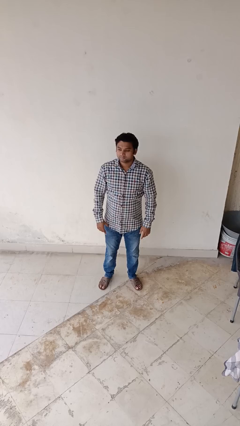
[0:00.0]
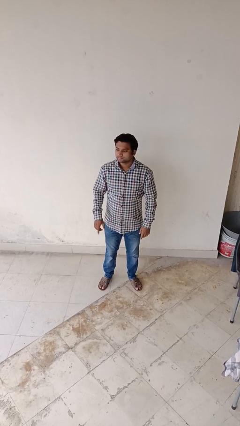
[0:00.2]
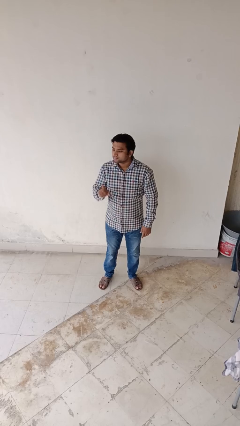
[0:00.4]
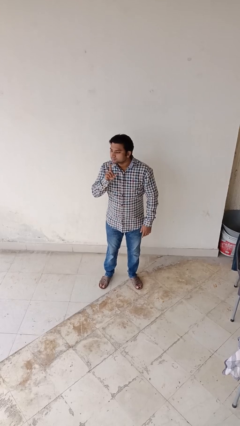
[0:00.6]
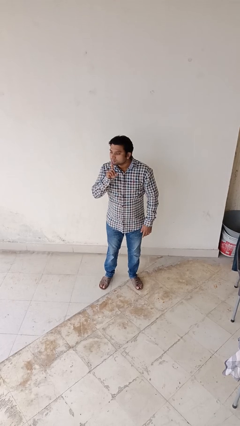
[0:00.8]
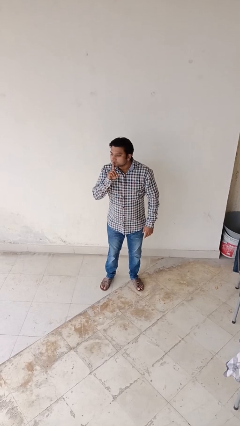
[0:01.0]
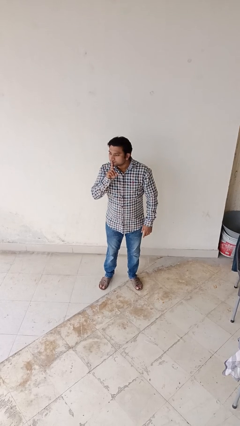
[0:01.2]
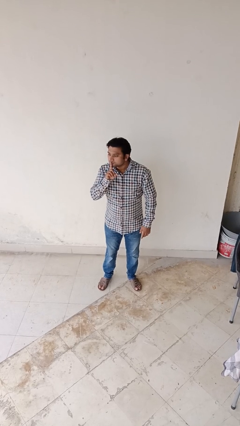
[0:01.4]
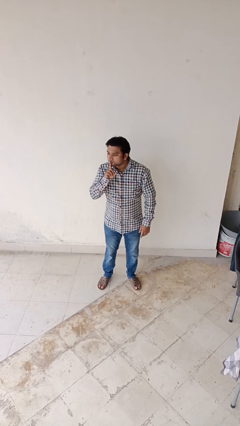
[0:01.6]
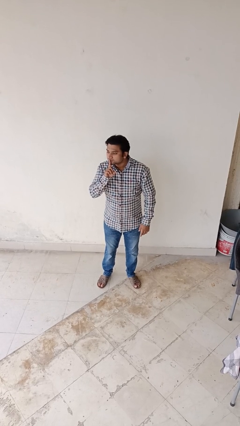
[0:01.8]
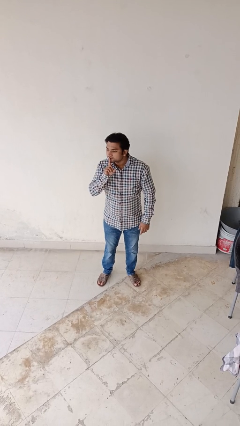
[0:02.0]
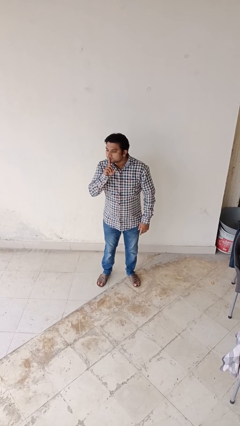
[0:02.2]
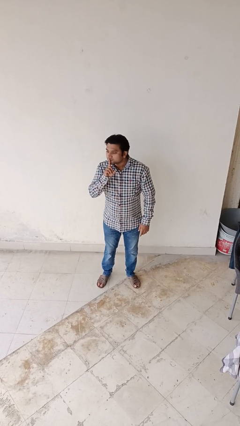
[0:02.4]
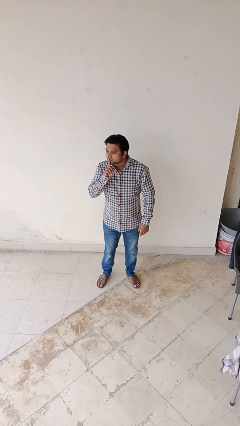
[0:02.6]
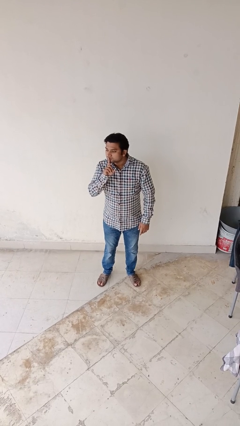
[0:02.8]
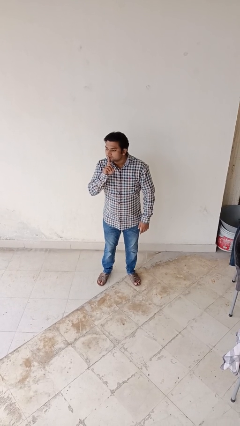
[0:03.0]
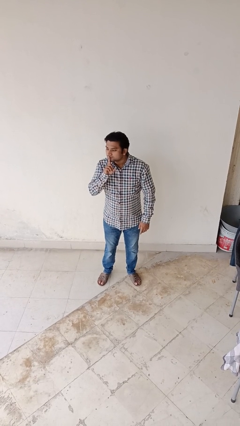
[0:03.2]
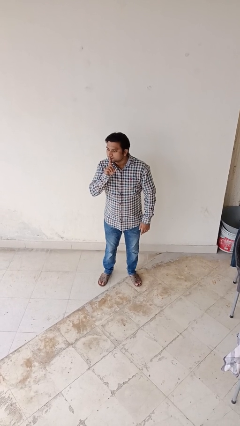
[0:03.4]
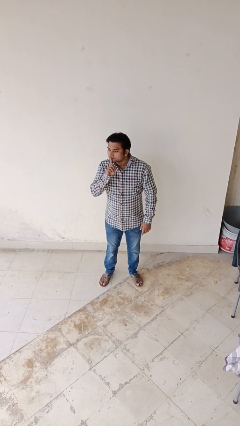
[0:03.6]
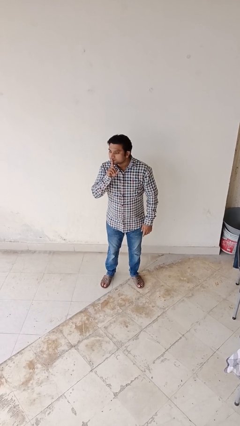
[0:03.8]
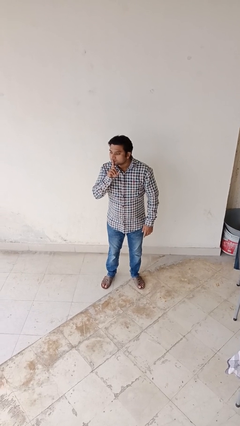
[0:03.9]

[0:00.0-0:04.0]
person gestures be quiet

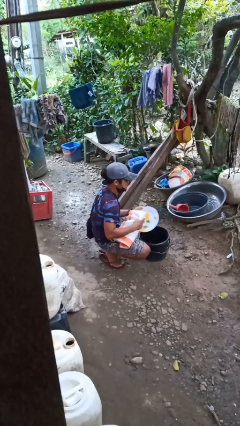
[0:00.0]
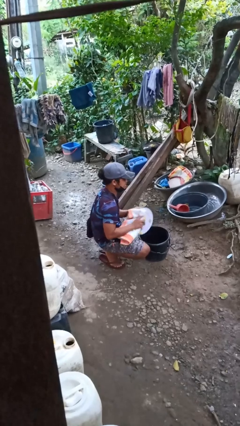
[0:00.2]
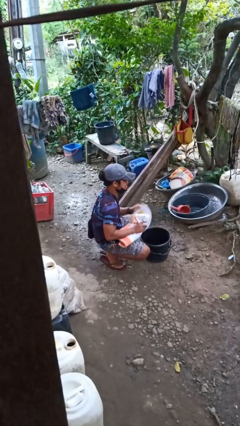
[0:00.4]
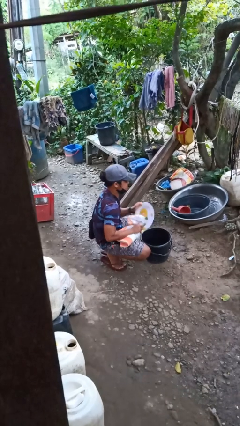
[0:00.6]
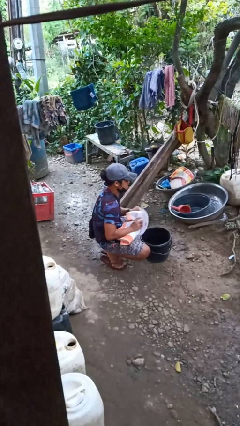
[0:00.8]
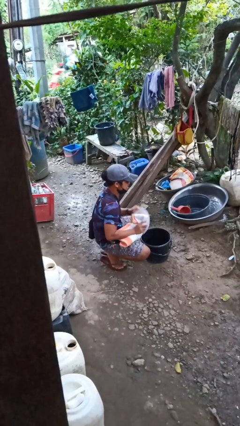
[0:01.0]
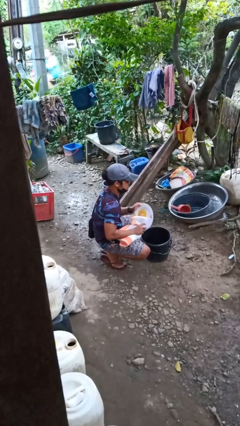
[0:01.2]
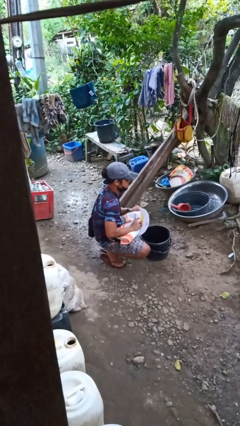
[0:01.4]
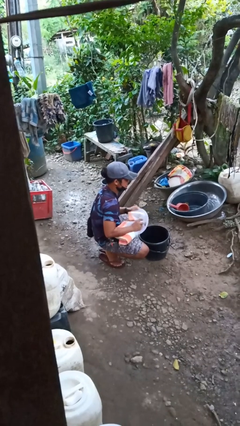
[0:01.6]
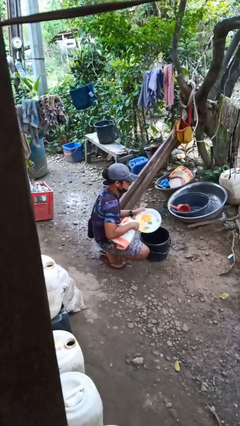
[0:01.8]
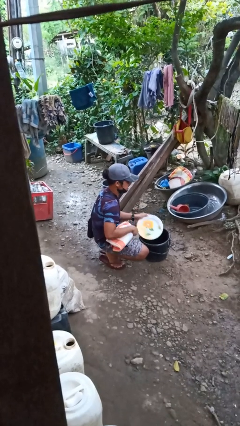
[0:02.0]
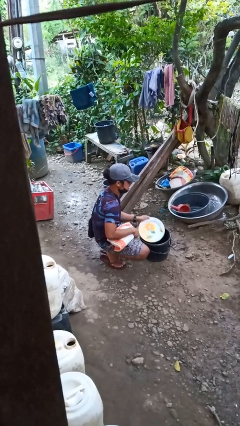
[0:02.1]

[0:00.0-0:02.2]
person dries dish

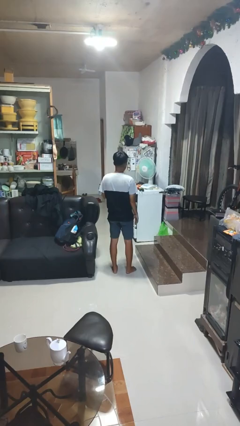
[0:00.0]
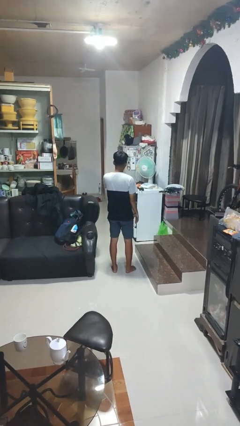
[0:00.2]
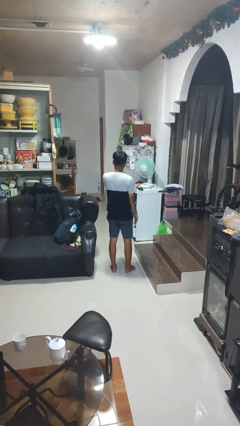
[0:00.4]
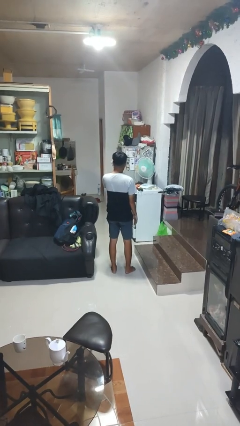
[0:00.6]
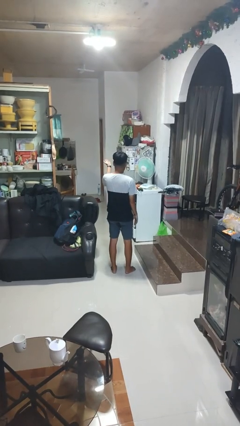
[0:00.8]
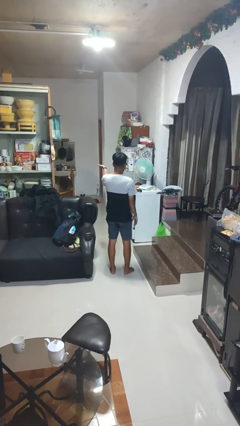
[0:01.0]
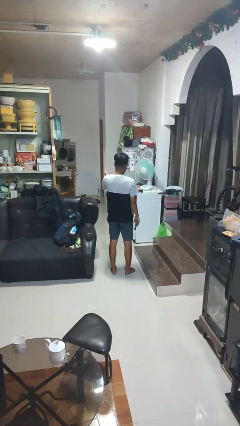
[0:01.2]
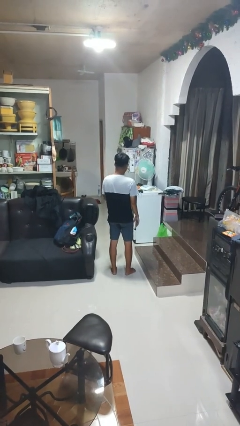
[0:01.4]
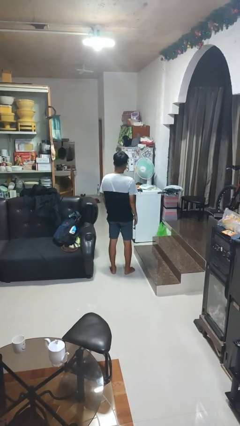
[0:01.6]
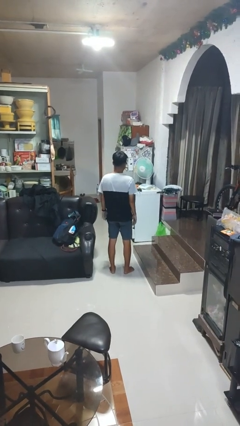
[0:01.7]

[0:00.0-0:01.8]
person gestures blow kiss

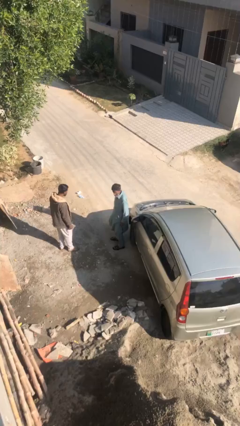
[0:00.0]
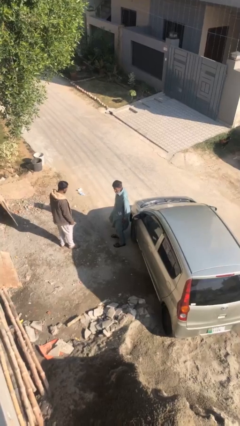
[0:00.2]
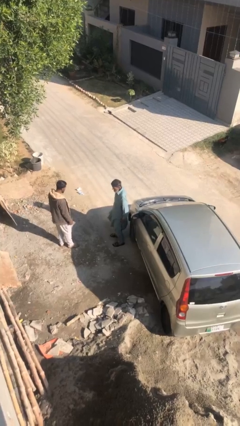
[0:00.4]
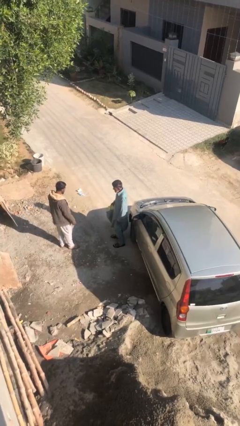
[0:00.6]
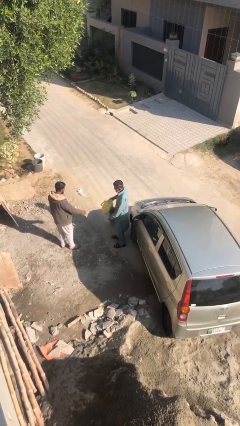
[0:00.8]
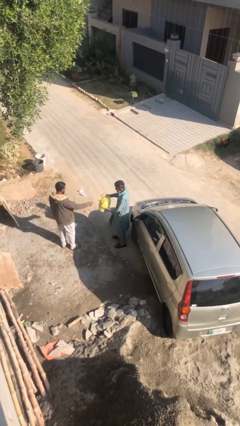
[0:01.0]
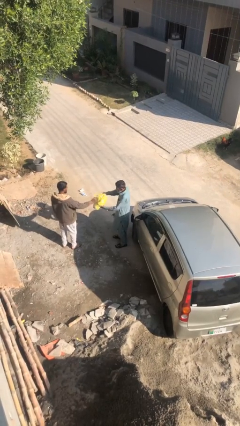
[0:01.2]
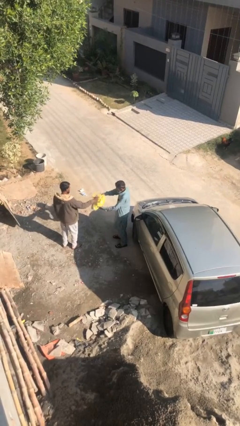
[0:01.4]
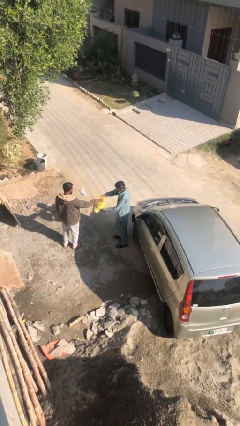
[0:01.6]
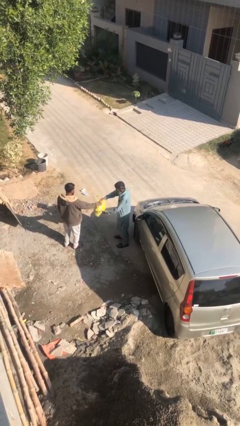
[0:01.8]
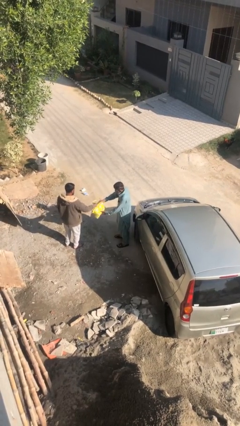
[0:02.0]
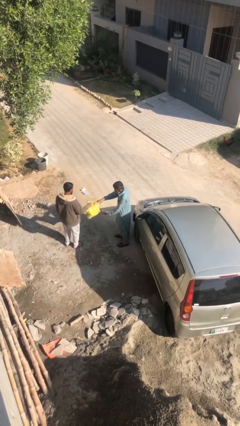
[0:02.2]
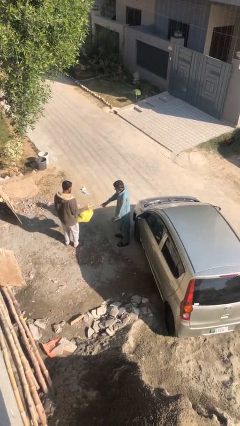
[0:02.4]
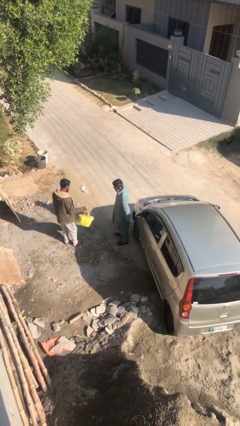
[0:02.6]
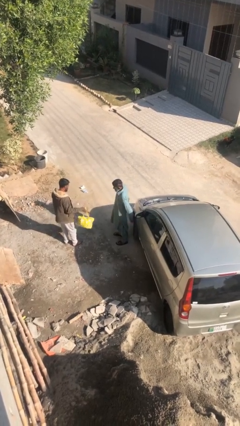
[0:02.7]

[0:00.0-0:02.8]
person transfers object to person

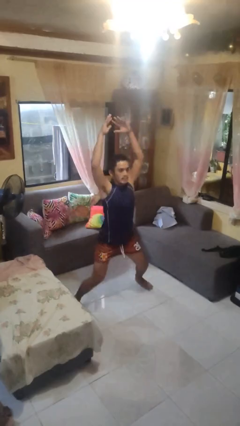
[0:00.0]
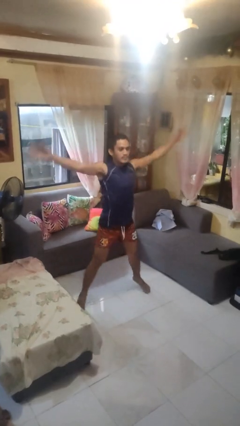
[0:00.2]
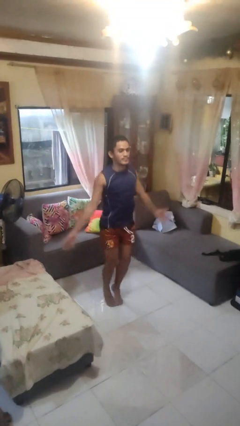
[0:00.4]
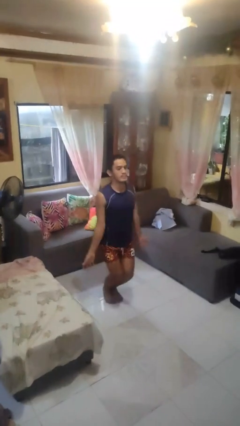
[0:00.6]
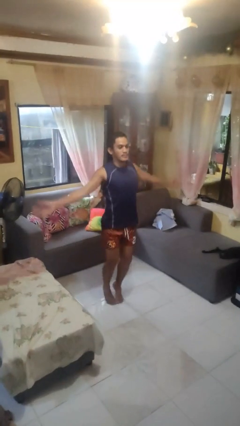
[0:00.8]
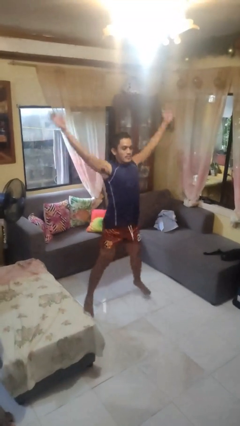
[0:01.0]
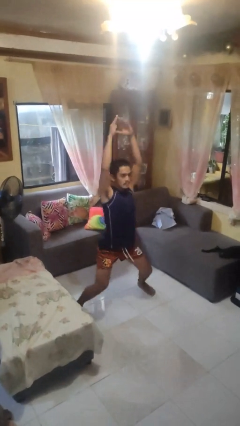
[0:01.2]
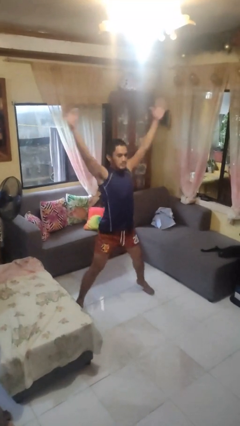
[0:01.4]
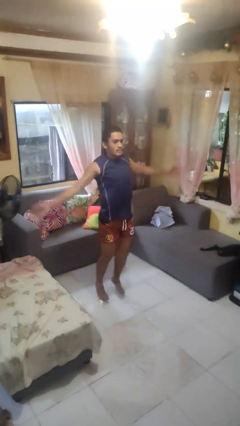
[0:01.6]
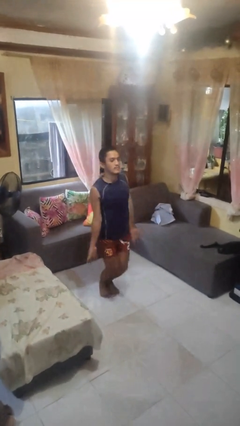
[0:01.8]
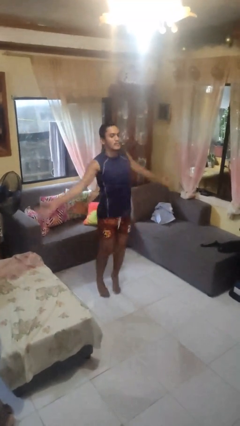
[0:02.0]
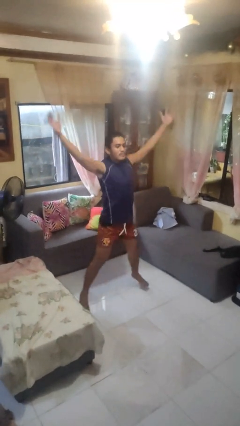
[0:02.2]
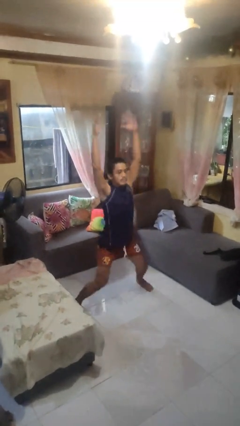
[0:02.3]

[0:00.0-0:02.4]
person exercises with jumping jacks

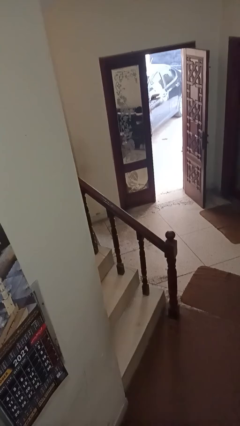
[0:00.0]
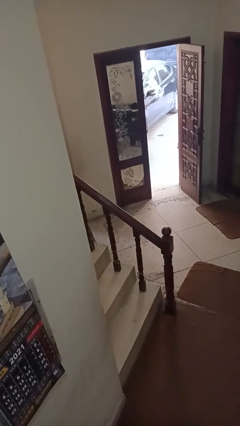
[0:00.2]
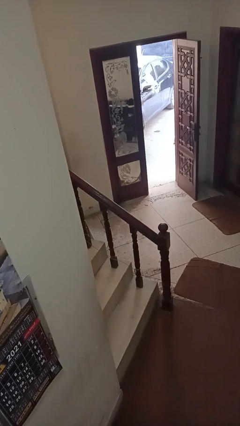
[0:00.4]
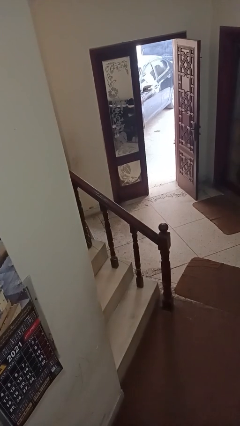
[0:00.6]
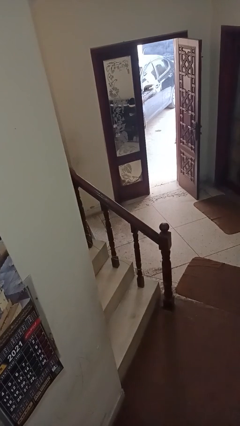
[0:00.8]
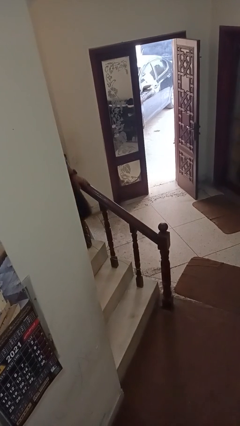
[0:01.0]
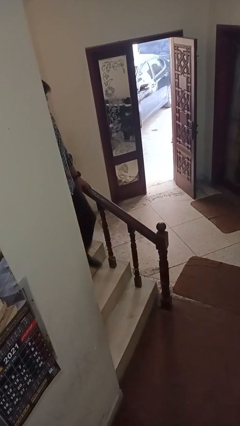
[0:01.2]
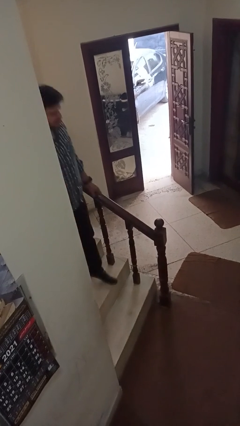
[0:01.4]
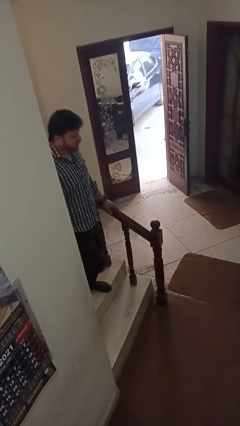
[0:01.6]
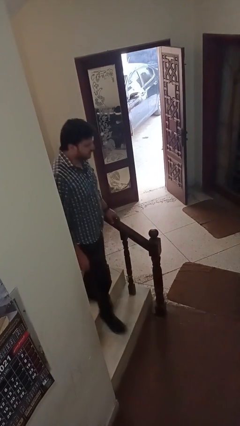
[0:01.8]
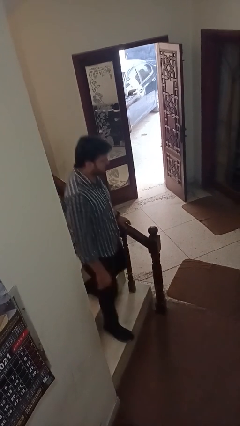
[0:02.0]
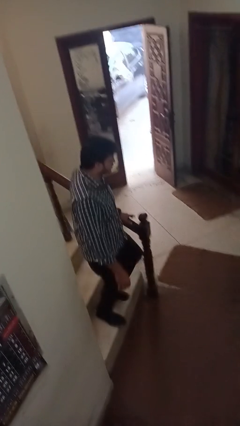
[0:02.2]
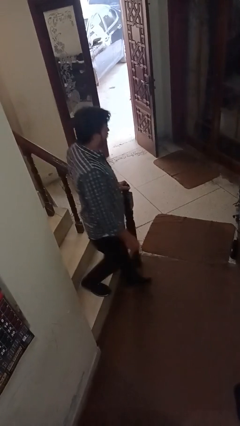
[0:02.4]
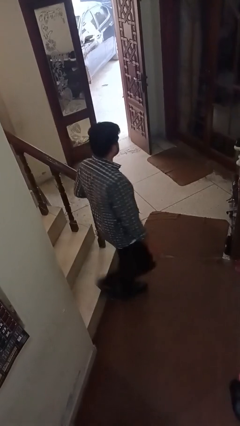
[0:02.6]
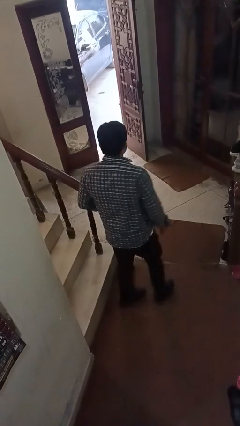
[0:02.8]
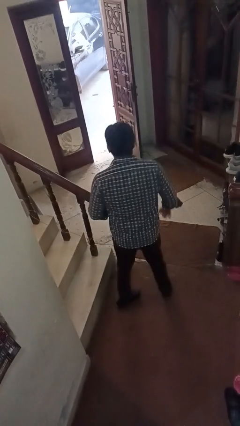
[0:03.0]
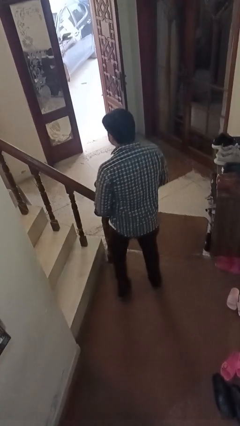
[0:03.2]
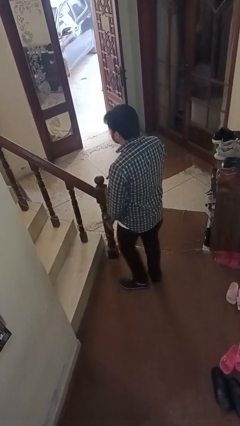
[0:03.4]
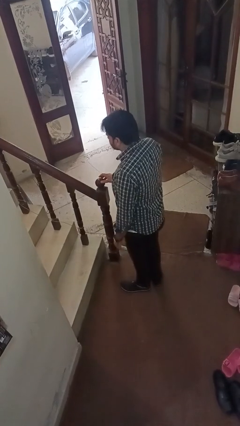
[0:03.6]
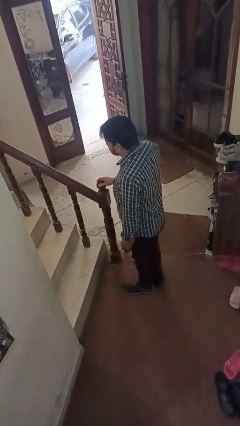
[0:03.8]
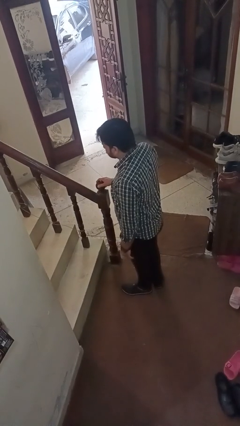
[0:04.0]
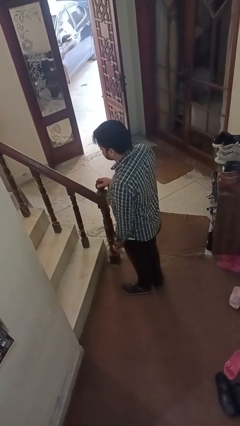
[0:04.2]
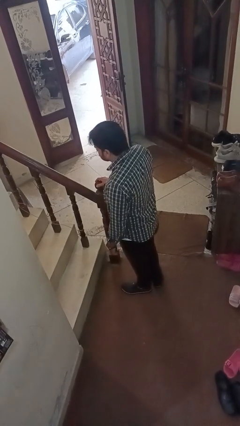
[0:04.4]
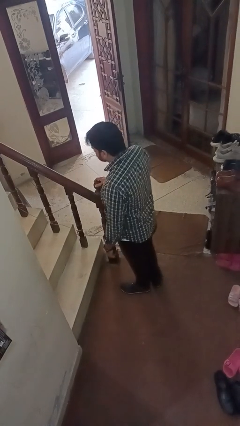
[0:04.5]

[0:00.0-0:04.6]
person climbs down stairs
